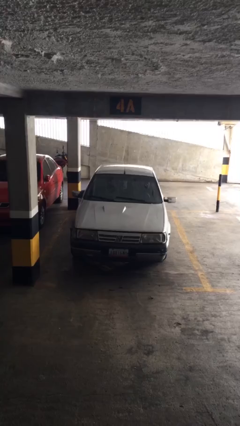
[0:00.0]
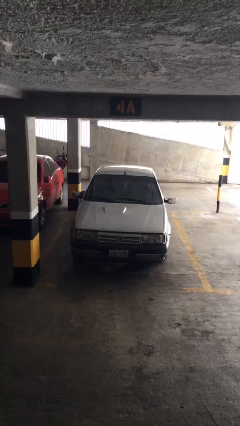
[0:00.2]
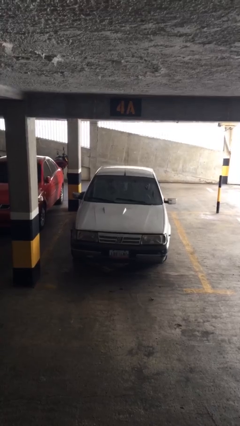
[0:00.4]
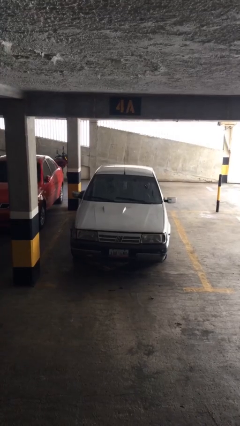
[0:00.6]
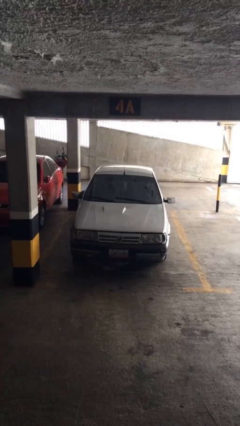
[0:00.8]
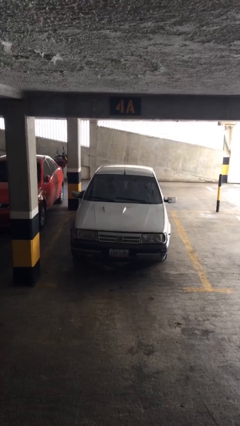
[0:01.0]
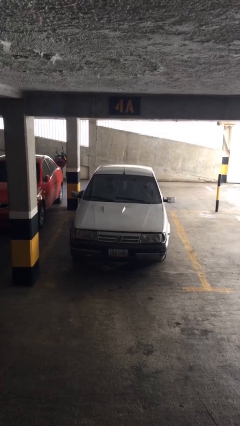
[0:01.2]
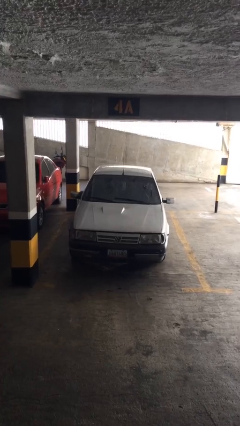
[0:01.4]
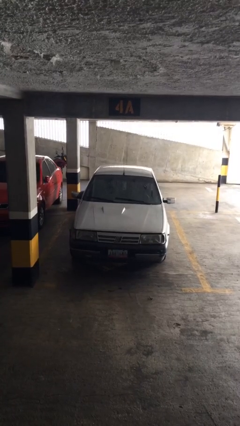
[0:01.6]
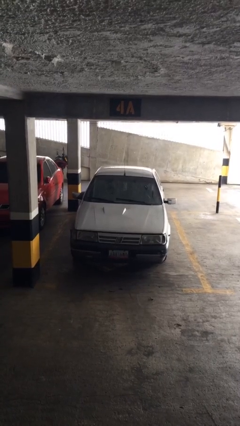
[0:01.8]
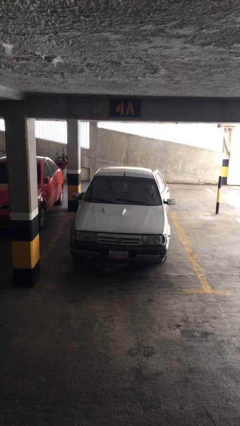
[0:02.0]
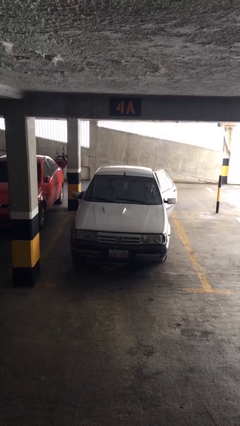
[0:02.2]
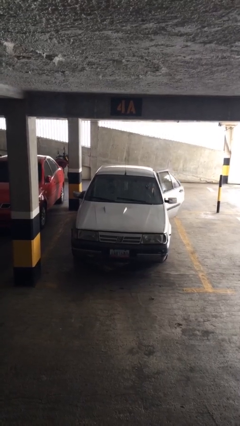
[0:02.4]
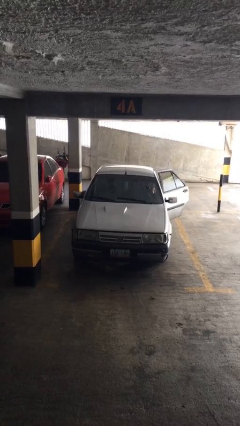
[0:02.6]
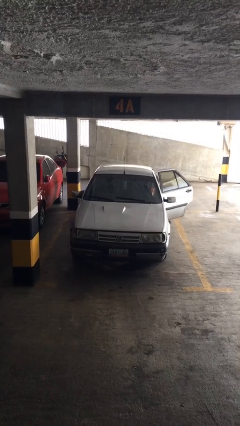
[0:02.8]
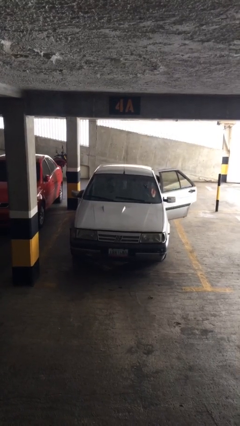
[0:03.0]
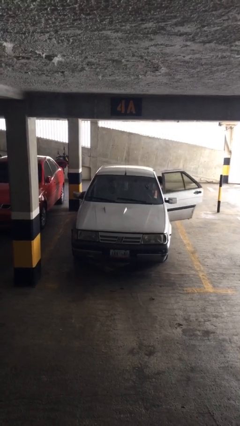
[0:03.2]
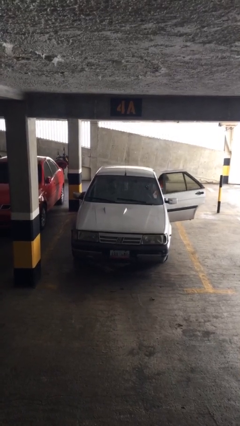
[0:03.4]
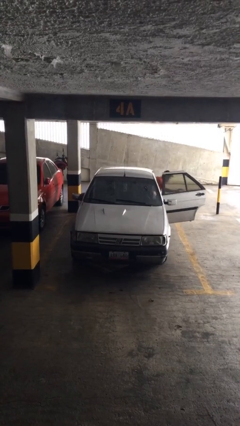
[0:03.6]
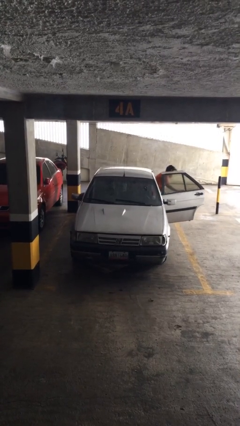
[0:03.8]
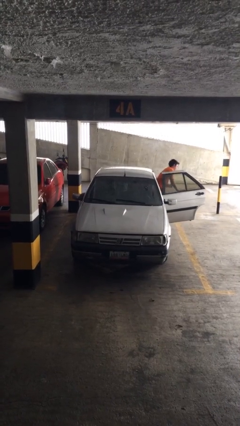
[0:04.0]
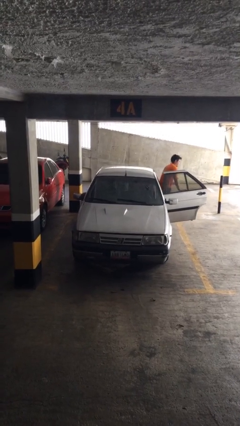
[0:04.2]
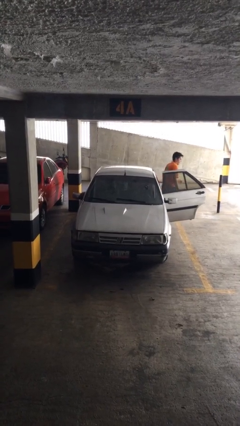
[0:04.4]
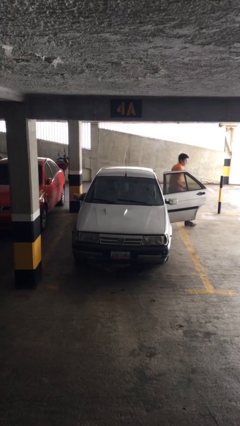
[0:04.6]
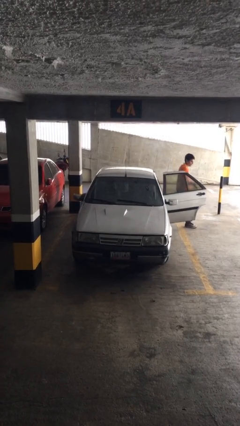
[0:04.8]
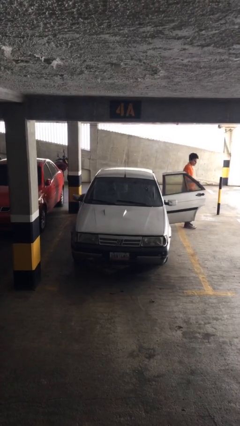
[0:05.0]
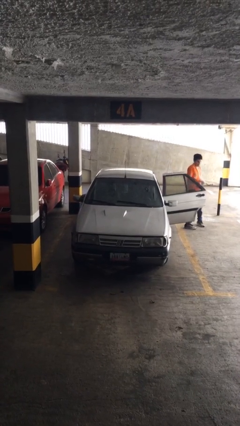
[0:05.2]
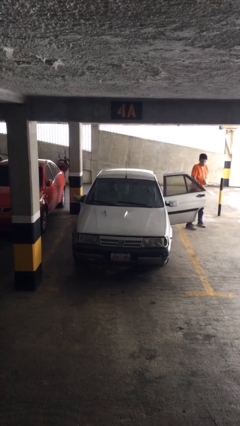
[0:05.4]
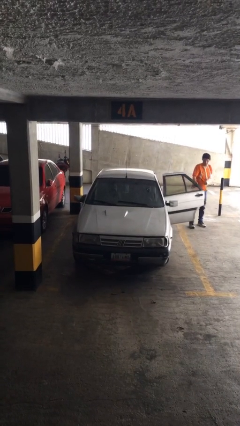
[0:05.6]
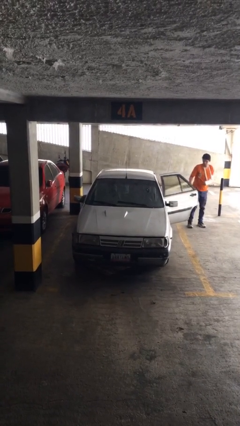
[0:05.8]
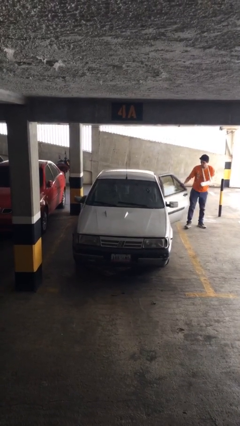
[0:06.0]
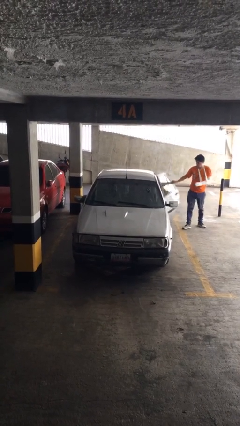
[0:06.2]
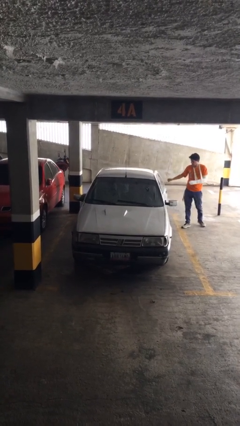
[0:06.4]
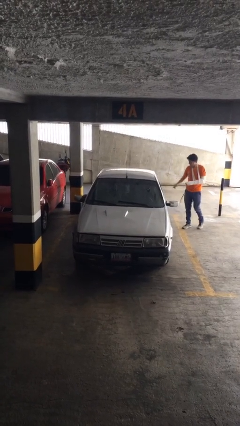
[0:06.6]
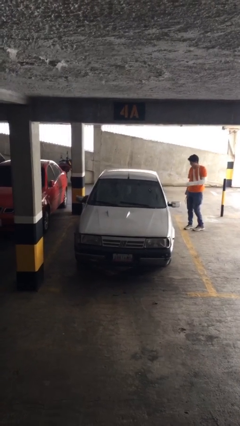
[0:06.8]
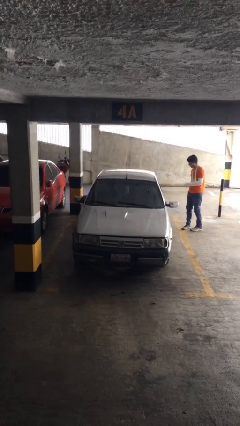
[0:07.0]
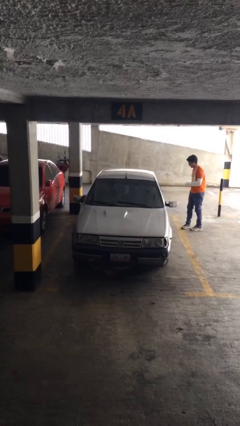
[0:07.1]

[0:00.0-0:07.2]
car drops off person

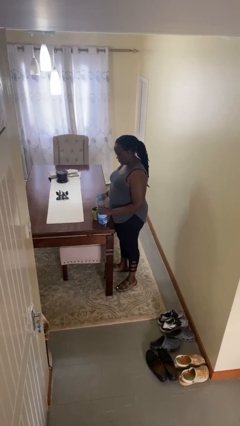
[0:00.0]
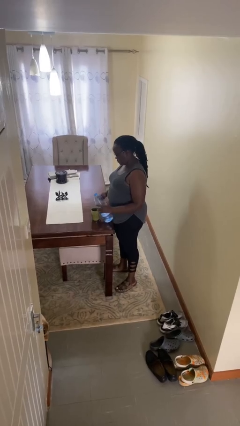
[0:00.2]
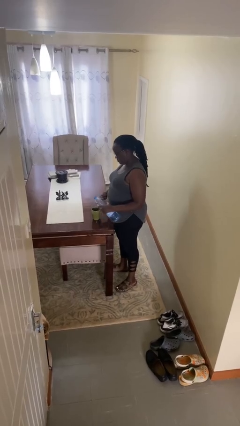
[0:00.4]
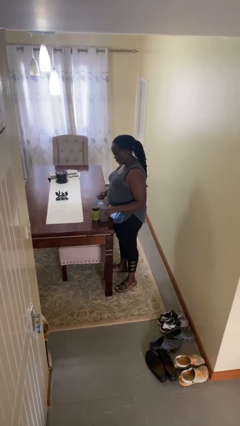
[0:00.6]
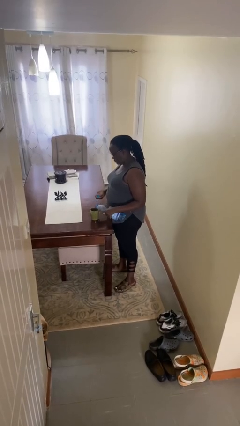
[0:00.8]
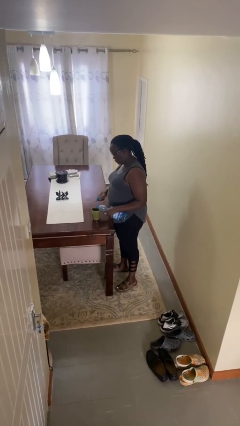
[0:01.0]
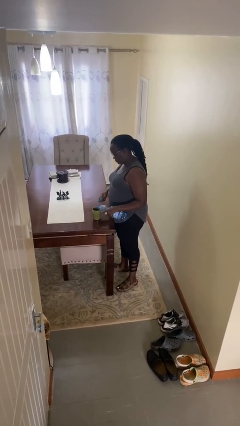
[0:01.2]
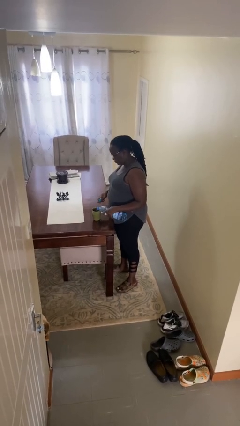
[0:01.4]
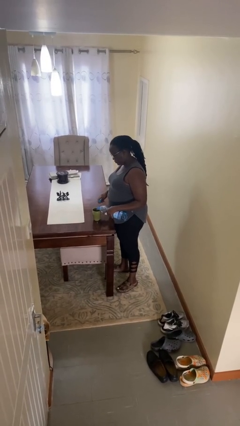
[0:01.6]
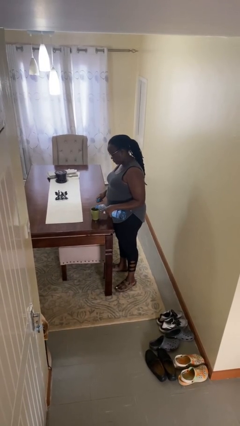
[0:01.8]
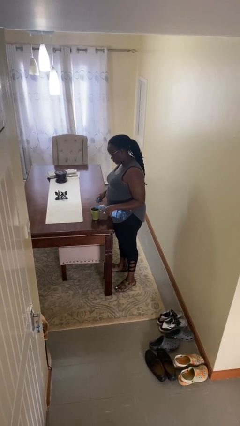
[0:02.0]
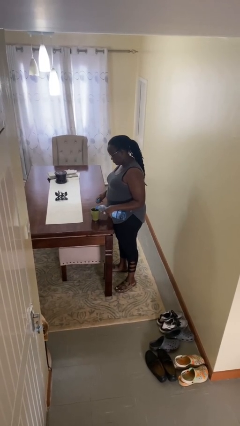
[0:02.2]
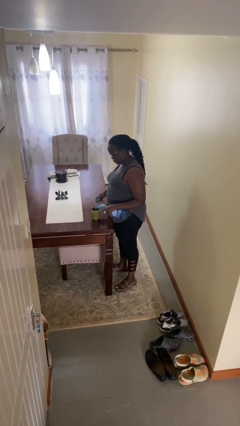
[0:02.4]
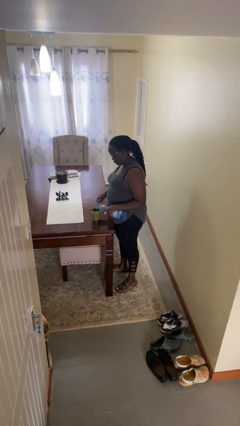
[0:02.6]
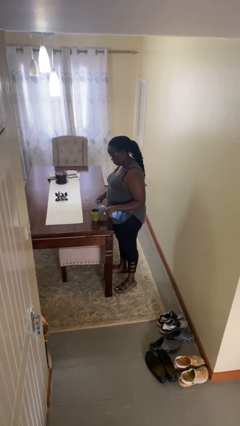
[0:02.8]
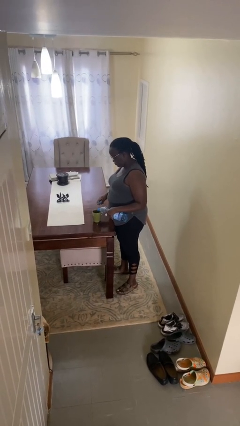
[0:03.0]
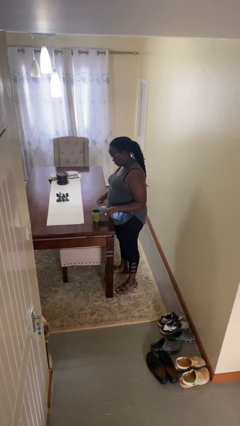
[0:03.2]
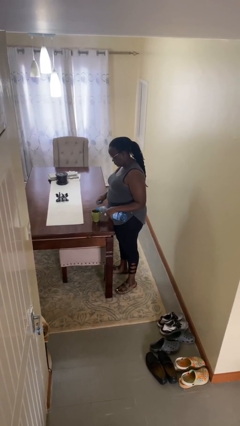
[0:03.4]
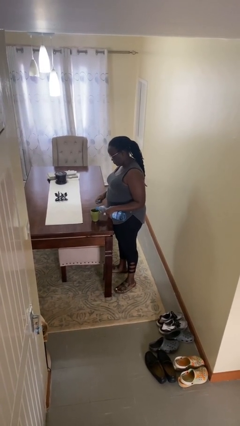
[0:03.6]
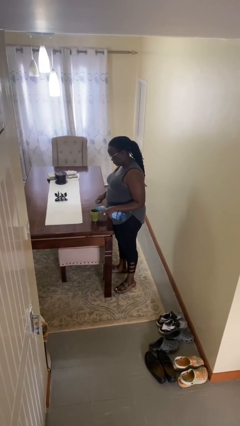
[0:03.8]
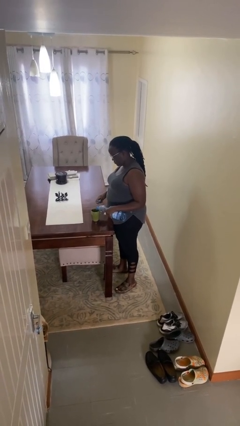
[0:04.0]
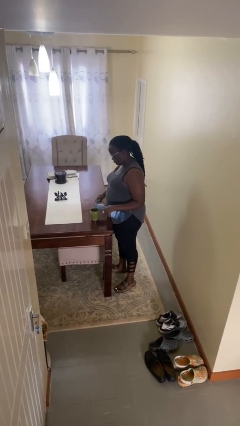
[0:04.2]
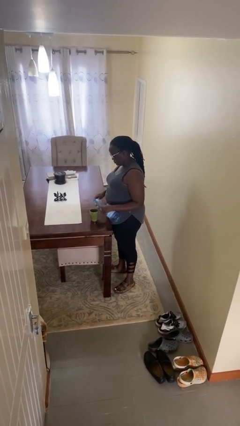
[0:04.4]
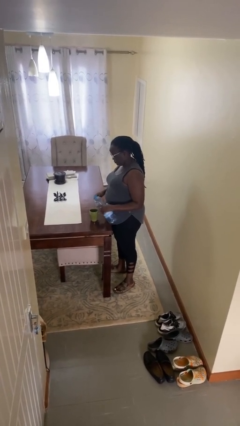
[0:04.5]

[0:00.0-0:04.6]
person pours liquid into cup

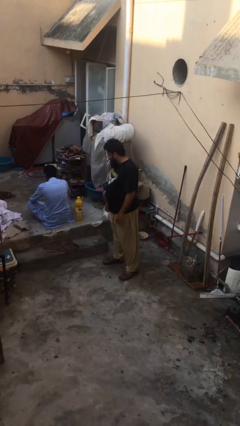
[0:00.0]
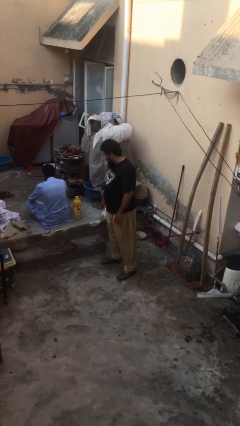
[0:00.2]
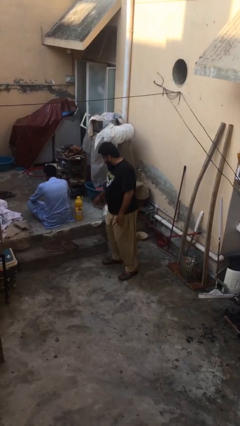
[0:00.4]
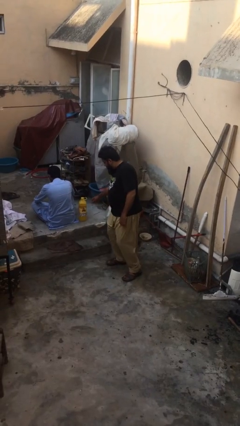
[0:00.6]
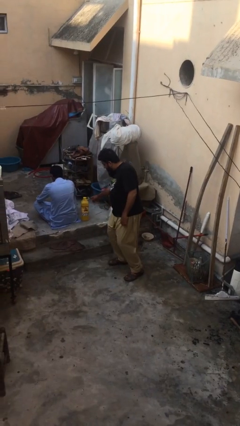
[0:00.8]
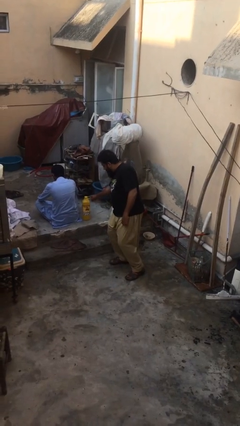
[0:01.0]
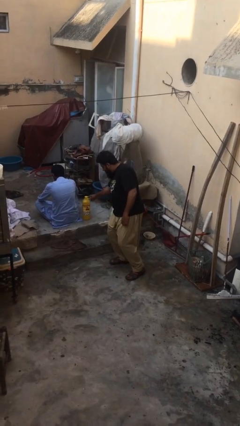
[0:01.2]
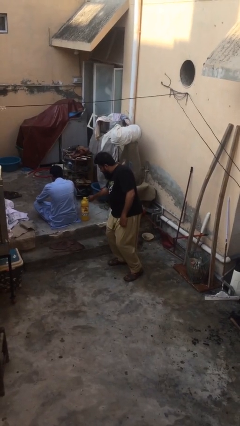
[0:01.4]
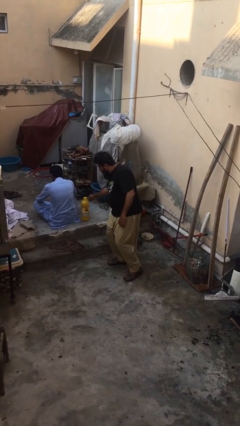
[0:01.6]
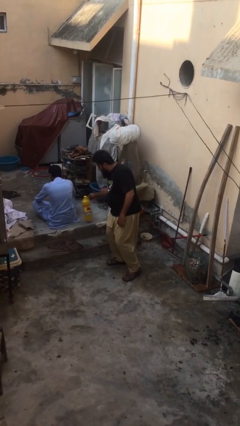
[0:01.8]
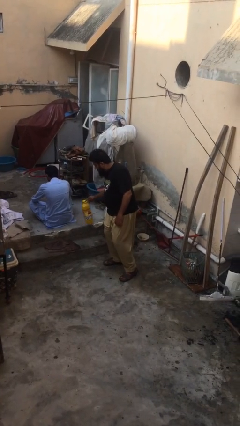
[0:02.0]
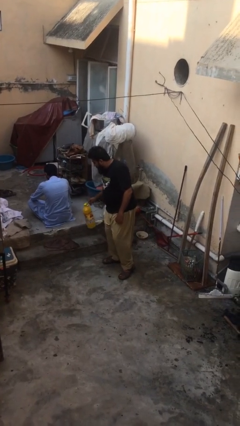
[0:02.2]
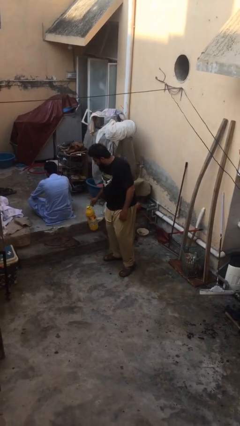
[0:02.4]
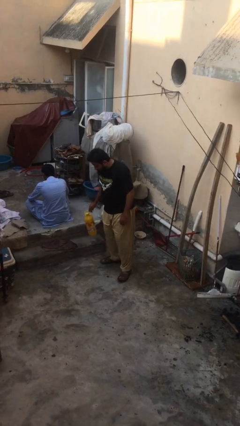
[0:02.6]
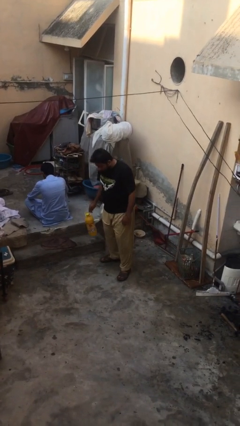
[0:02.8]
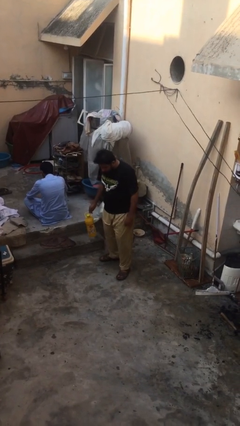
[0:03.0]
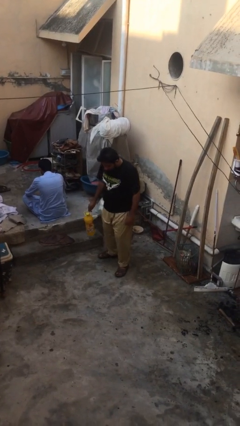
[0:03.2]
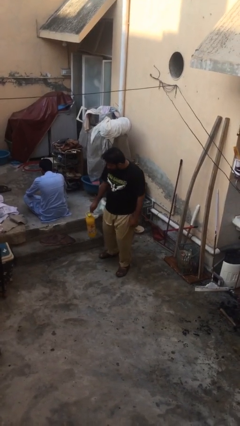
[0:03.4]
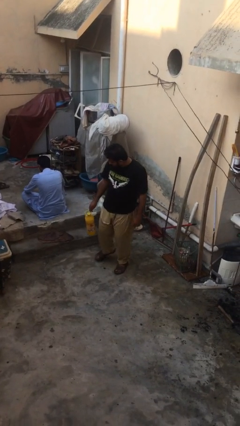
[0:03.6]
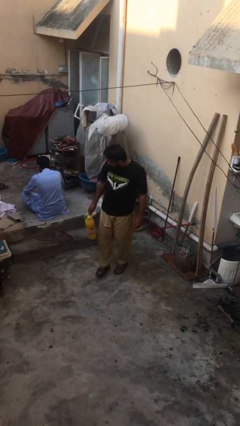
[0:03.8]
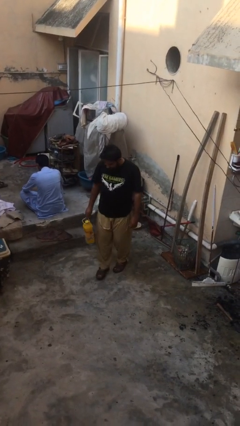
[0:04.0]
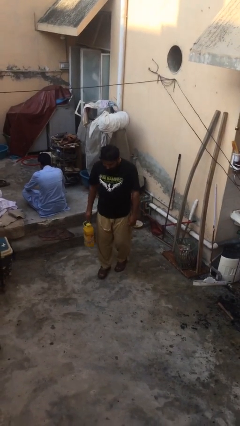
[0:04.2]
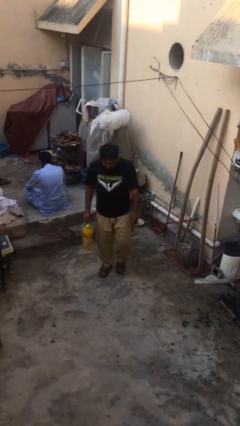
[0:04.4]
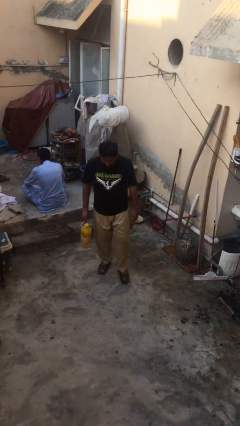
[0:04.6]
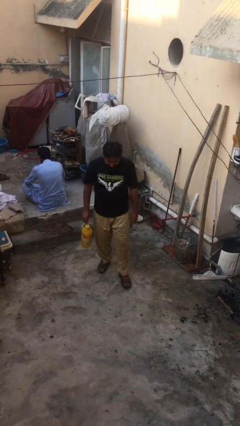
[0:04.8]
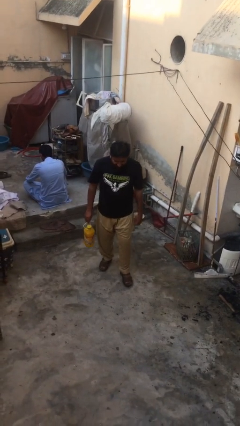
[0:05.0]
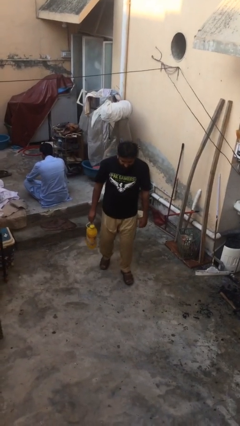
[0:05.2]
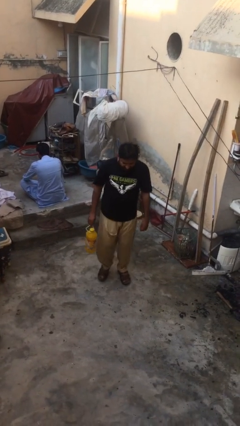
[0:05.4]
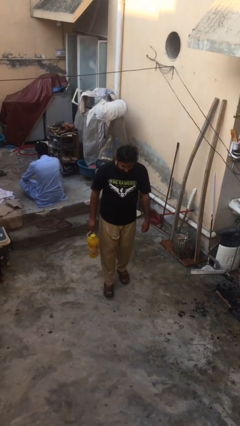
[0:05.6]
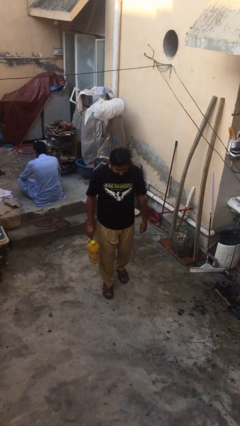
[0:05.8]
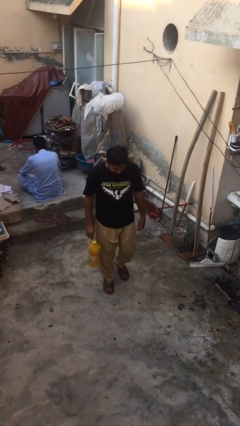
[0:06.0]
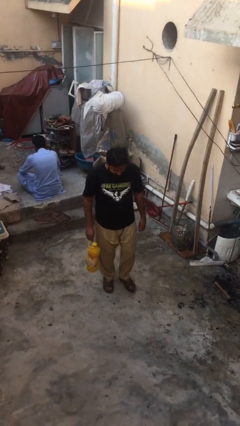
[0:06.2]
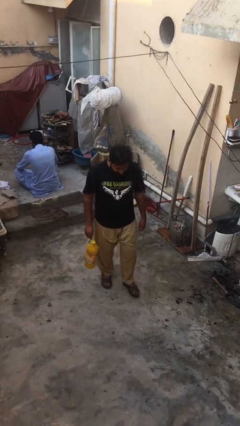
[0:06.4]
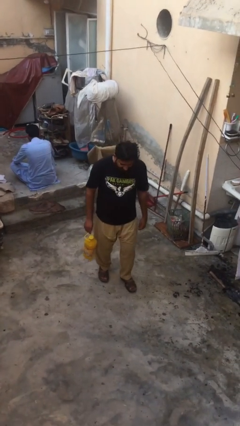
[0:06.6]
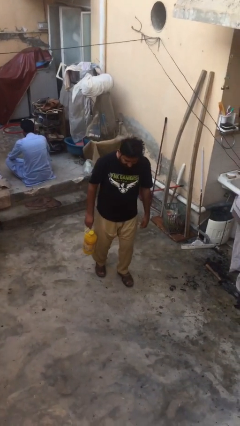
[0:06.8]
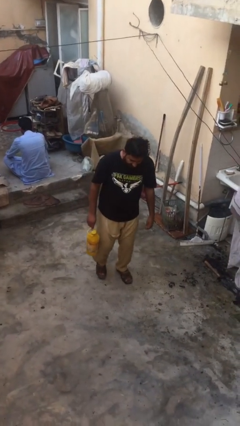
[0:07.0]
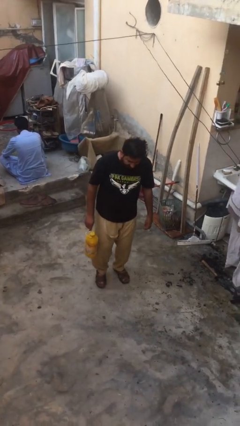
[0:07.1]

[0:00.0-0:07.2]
person steals object from person
